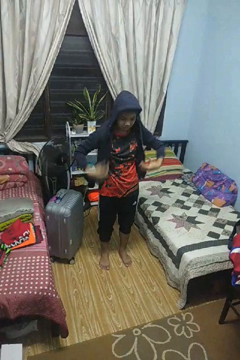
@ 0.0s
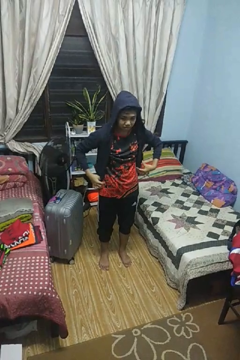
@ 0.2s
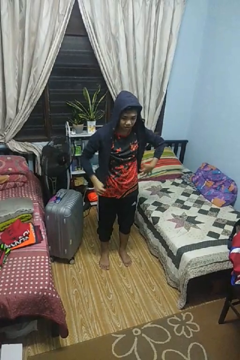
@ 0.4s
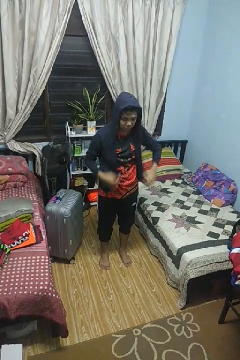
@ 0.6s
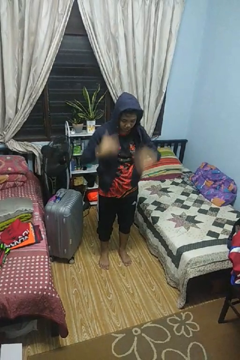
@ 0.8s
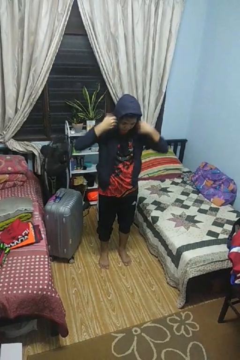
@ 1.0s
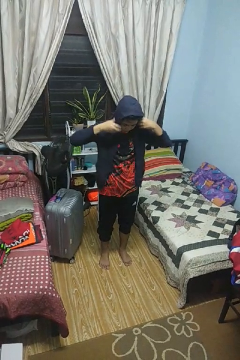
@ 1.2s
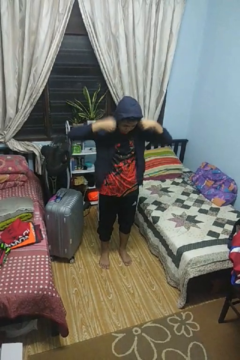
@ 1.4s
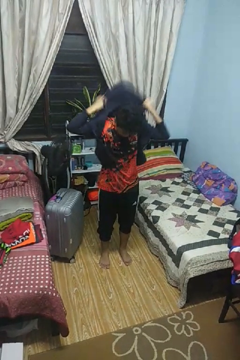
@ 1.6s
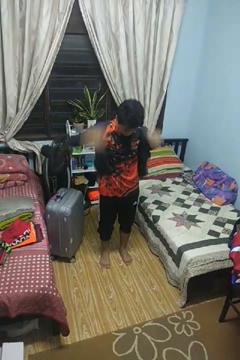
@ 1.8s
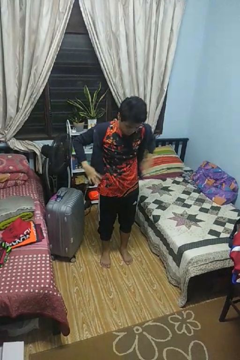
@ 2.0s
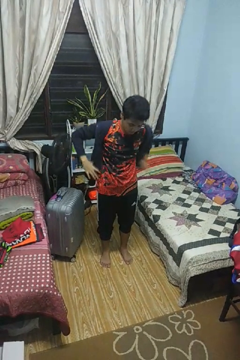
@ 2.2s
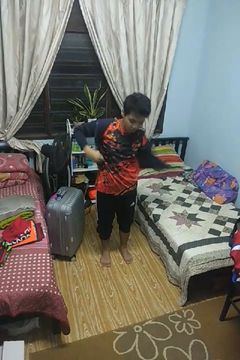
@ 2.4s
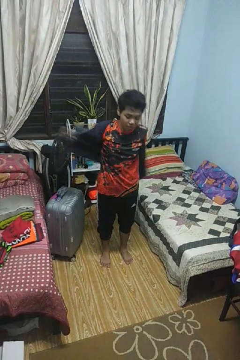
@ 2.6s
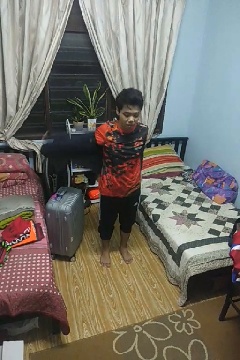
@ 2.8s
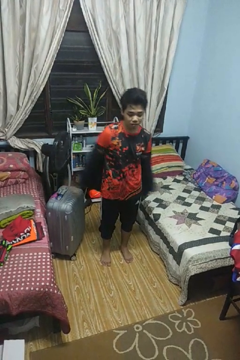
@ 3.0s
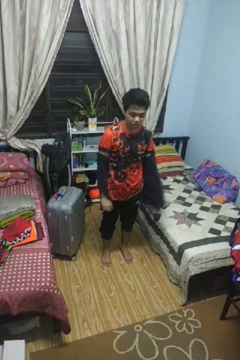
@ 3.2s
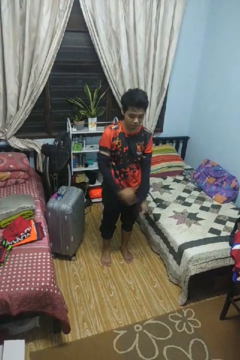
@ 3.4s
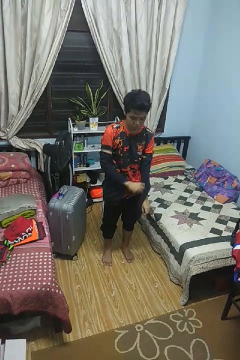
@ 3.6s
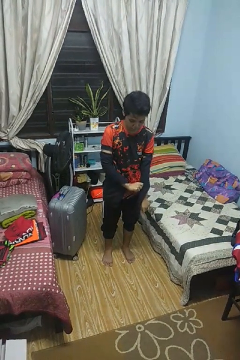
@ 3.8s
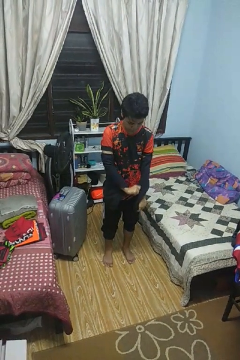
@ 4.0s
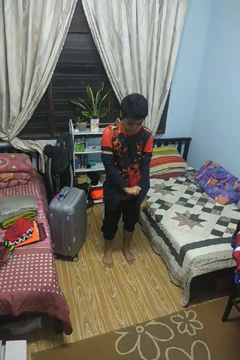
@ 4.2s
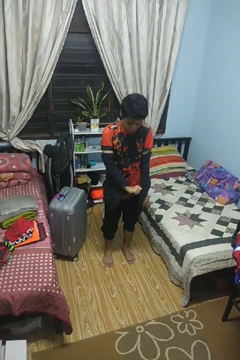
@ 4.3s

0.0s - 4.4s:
person takes off hoodie

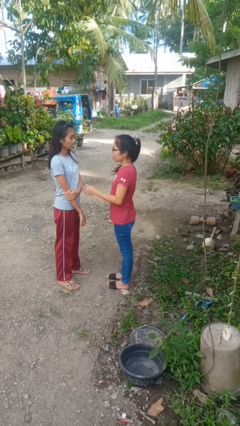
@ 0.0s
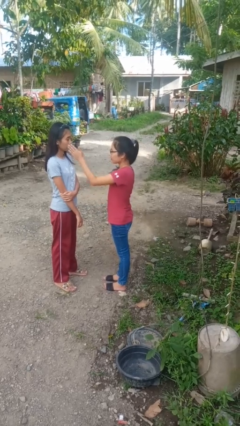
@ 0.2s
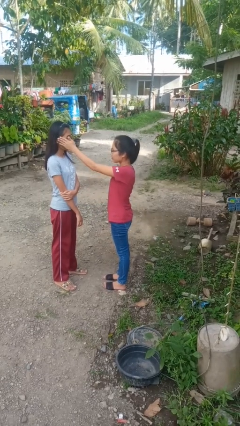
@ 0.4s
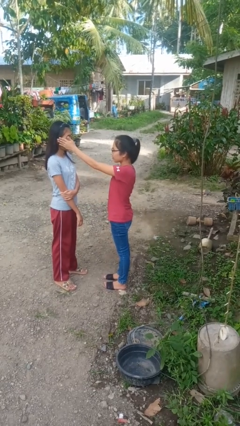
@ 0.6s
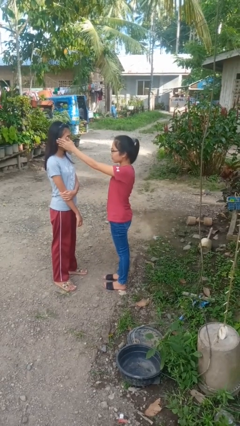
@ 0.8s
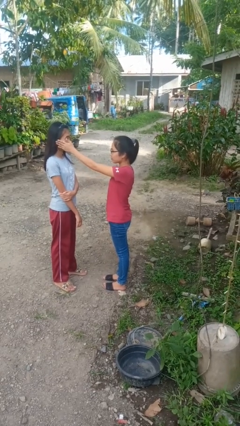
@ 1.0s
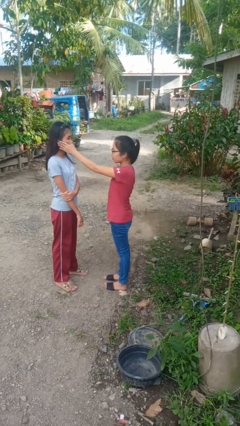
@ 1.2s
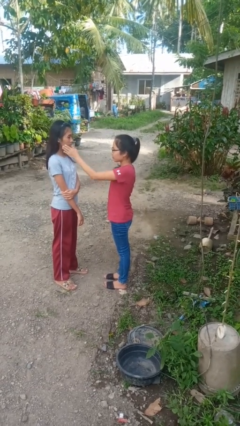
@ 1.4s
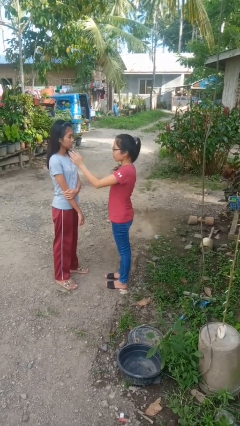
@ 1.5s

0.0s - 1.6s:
person touches face of person

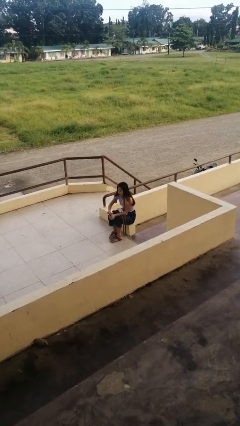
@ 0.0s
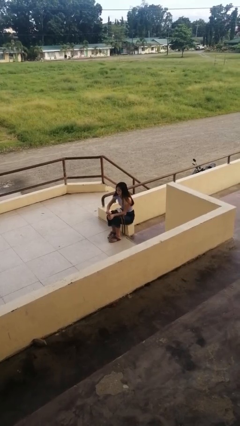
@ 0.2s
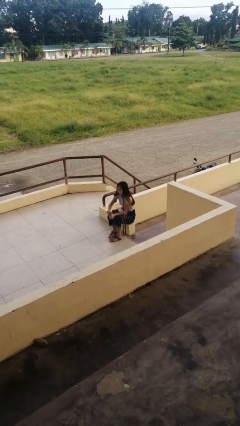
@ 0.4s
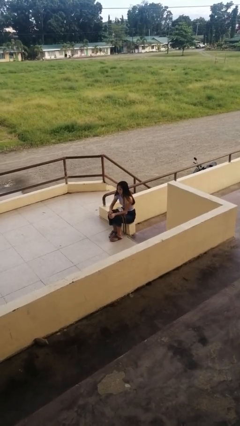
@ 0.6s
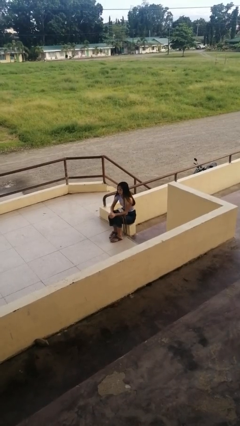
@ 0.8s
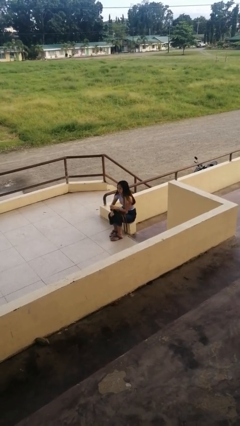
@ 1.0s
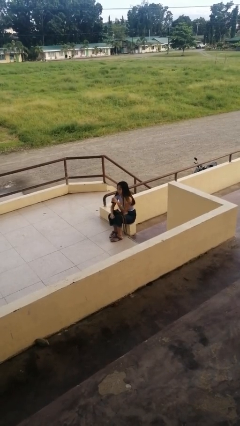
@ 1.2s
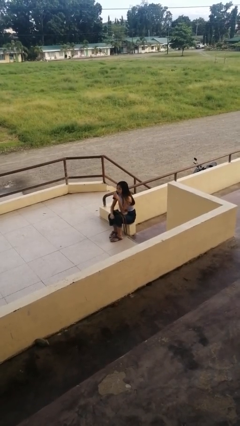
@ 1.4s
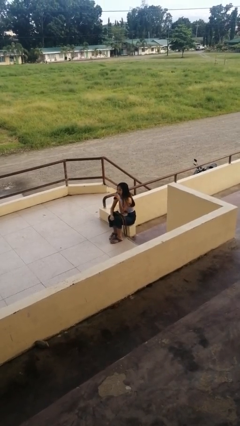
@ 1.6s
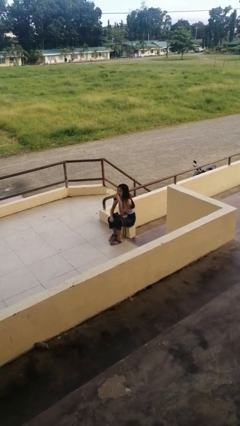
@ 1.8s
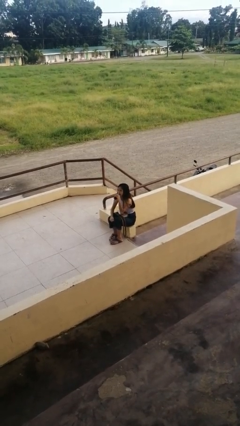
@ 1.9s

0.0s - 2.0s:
person drinks from beverage can

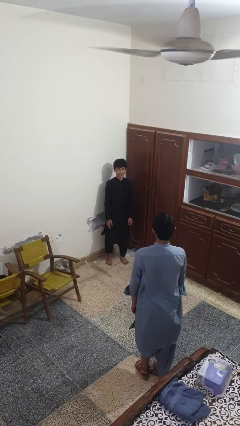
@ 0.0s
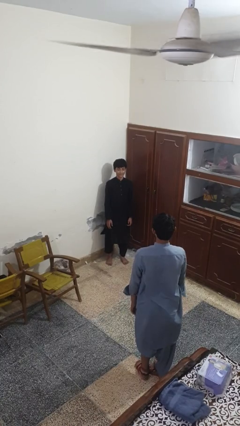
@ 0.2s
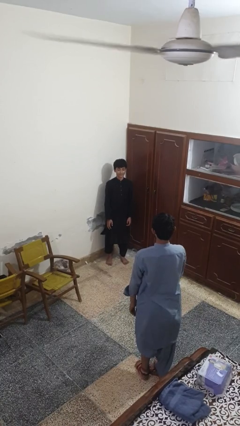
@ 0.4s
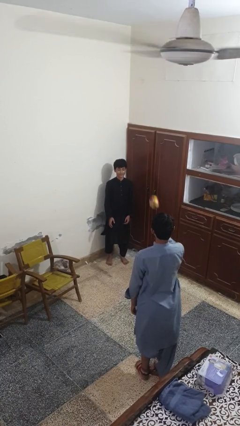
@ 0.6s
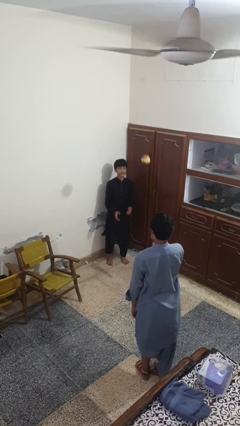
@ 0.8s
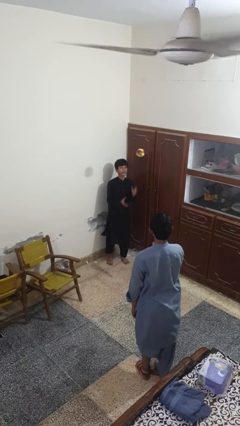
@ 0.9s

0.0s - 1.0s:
person catches object from person

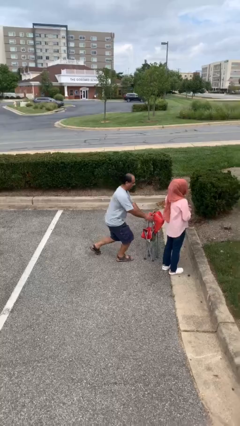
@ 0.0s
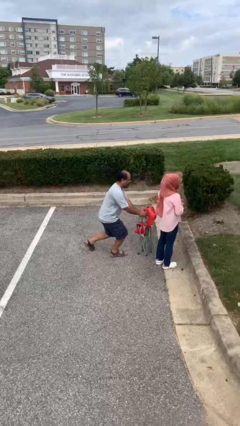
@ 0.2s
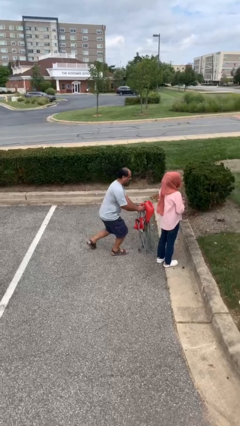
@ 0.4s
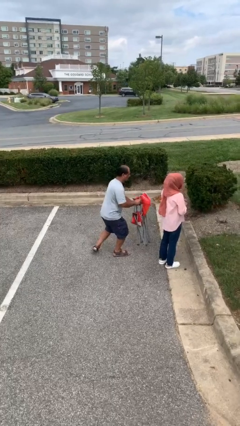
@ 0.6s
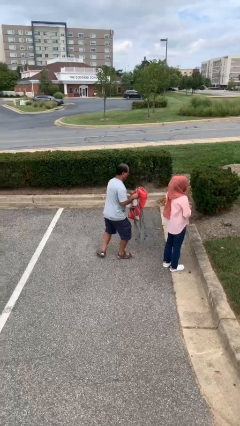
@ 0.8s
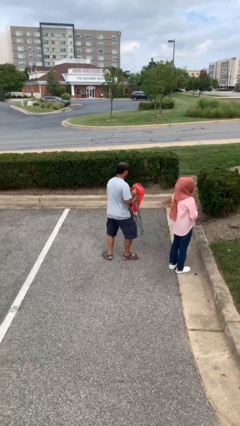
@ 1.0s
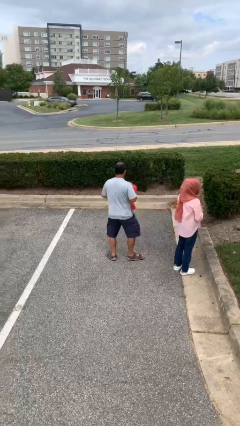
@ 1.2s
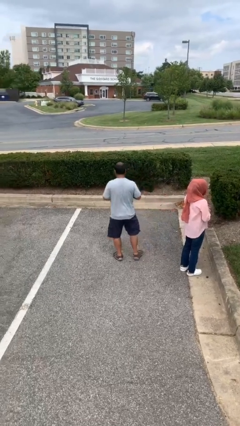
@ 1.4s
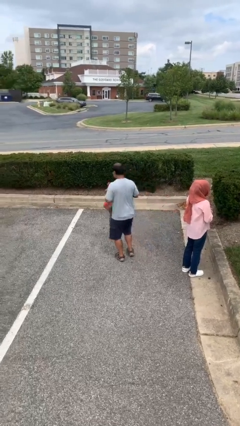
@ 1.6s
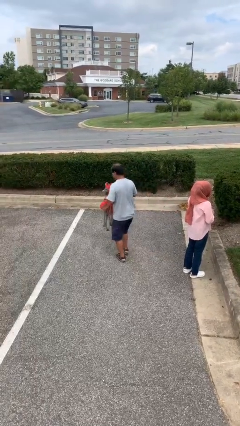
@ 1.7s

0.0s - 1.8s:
person steals object from person

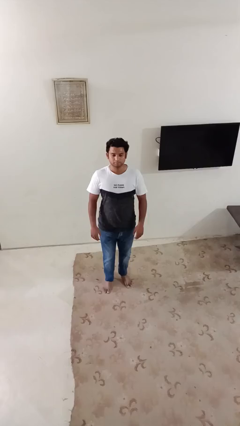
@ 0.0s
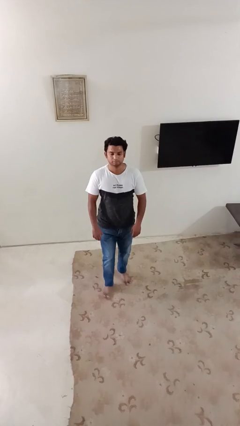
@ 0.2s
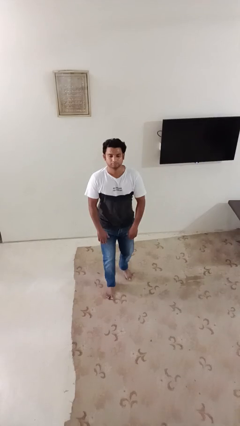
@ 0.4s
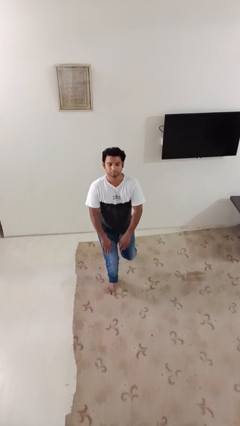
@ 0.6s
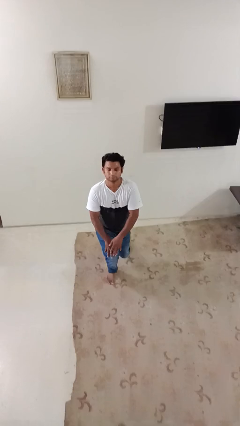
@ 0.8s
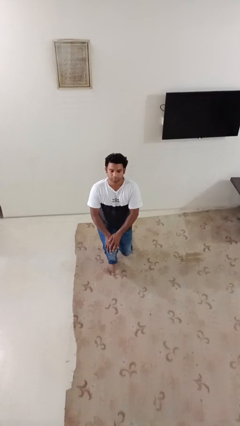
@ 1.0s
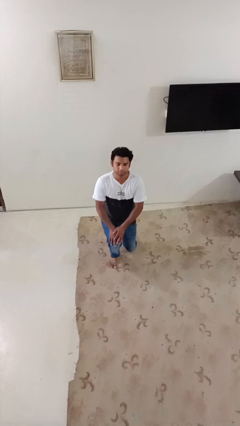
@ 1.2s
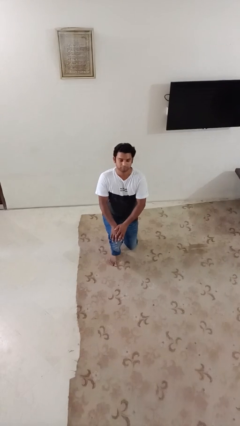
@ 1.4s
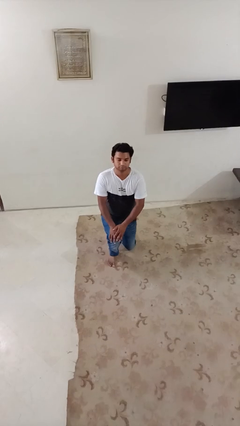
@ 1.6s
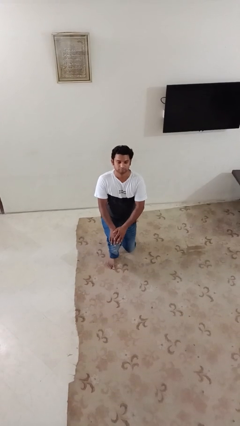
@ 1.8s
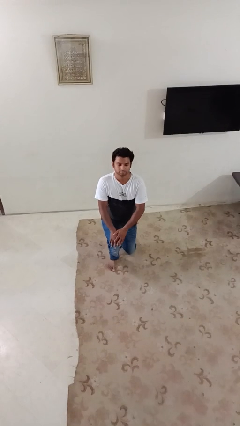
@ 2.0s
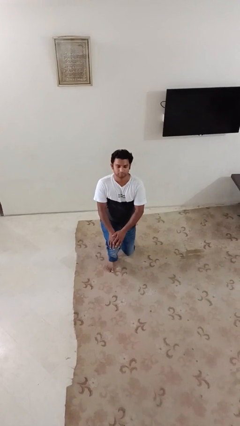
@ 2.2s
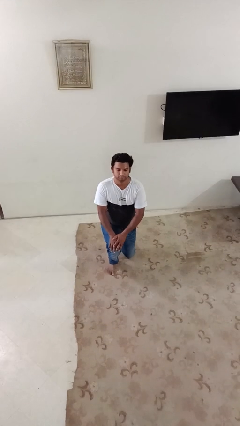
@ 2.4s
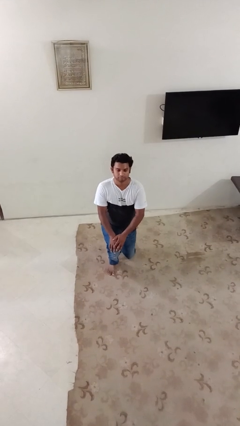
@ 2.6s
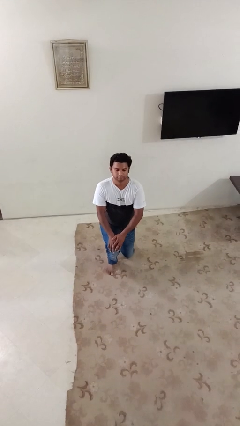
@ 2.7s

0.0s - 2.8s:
person kneels

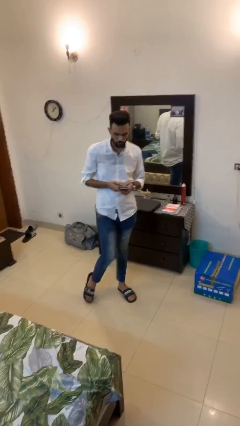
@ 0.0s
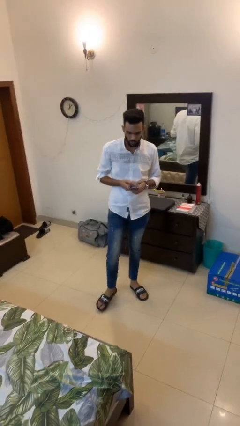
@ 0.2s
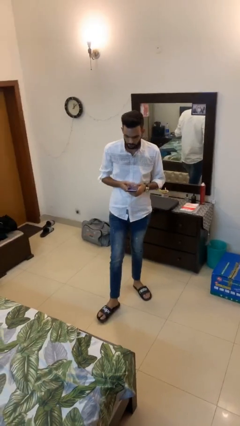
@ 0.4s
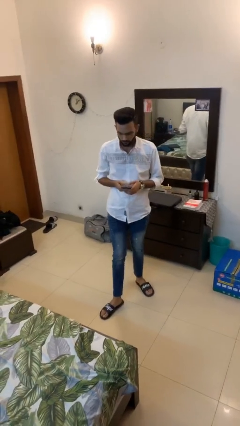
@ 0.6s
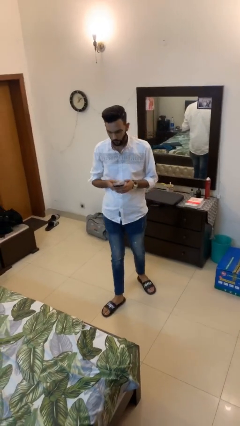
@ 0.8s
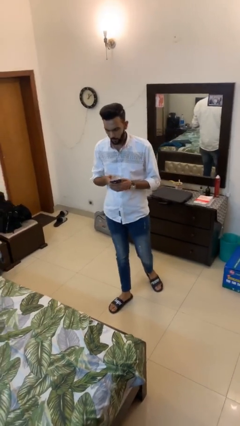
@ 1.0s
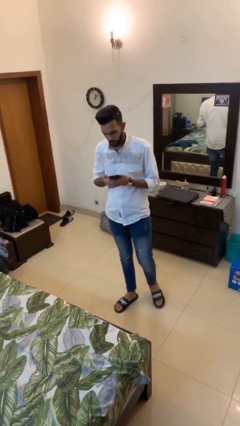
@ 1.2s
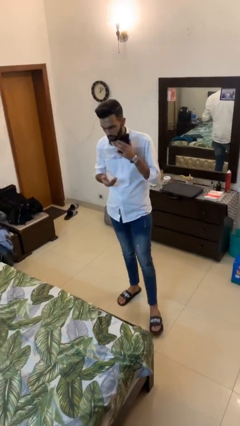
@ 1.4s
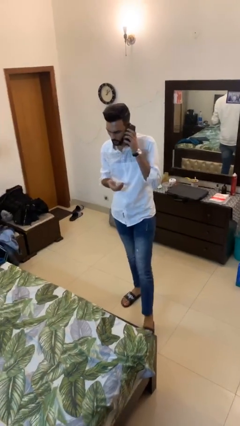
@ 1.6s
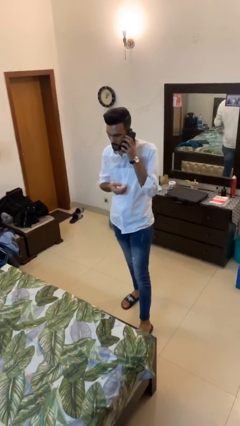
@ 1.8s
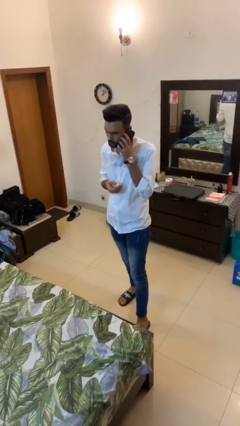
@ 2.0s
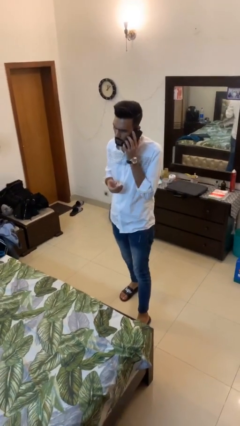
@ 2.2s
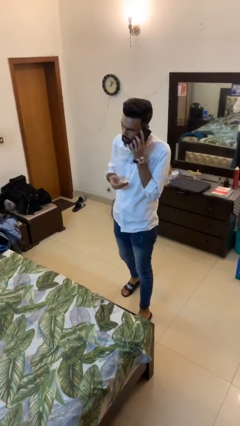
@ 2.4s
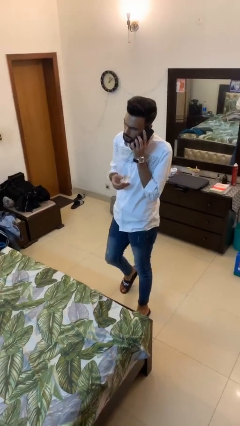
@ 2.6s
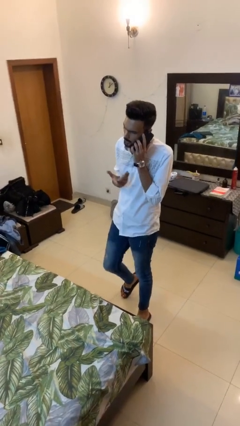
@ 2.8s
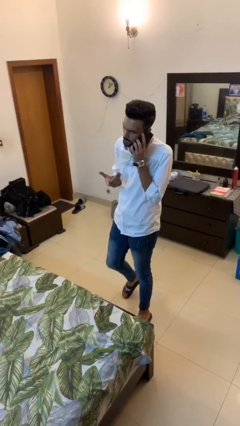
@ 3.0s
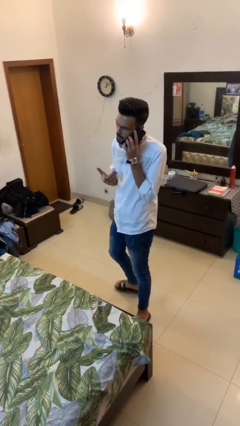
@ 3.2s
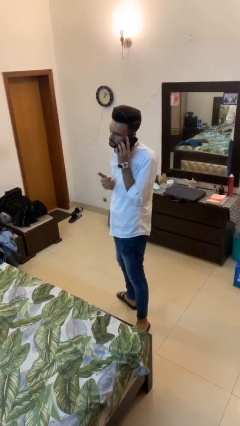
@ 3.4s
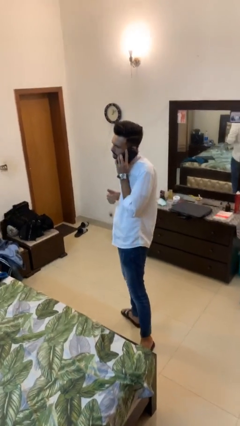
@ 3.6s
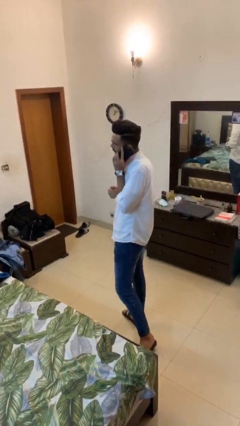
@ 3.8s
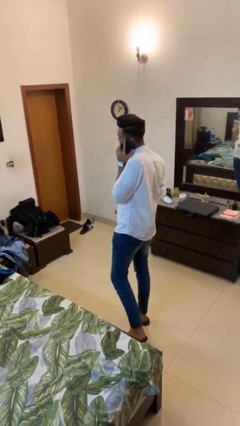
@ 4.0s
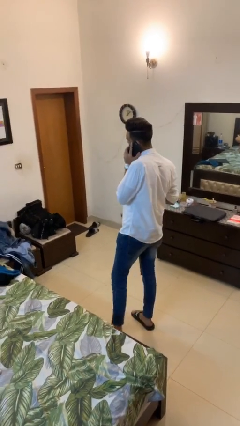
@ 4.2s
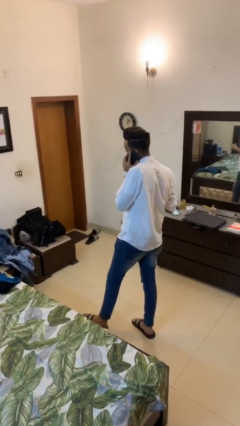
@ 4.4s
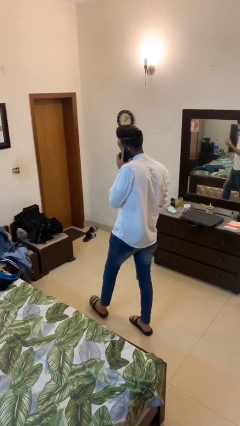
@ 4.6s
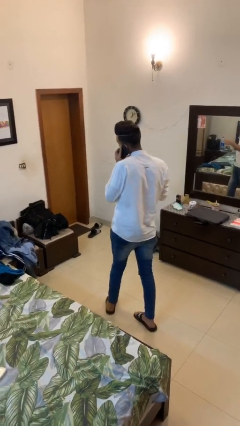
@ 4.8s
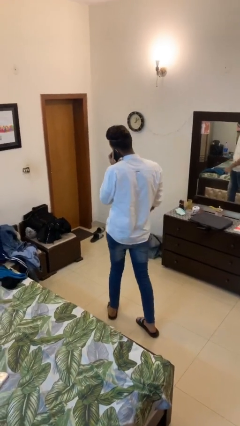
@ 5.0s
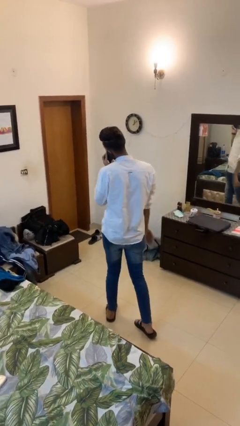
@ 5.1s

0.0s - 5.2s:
person talks on phone
